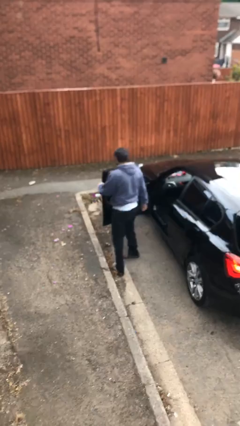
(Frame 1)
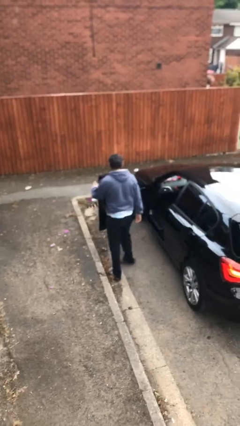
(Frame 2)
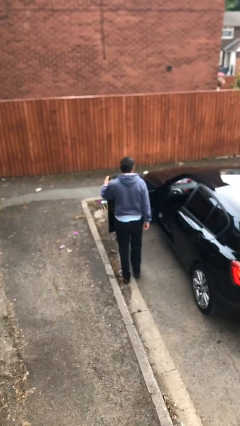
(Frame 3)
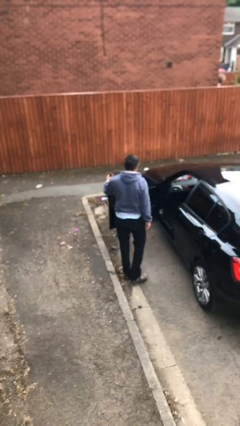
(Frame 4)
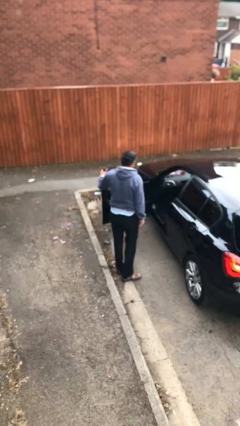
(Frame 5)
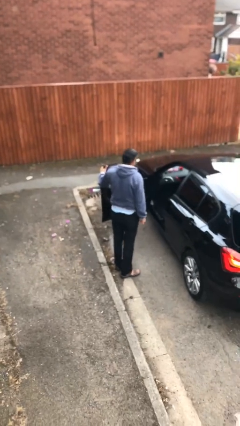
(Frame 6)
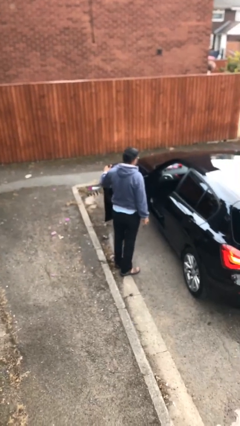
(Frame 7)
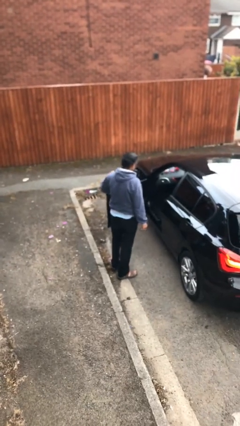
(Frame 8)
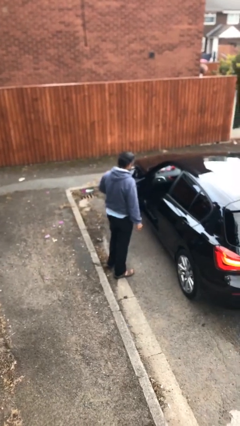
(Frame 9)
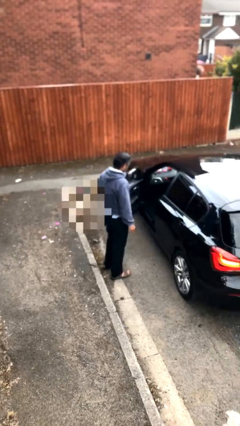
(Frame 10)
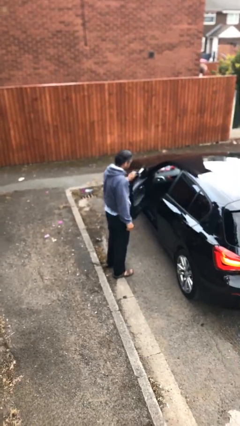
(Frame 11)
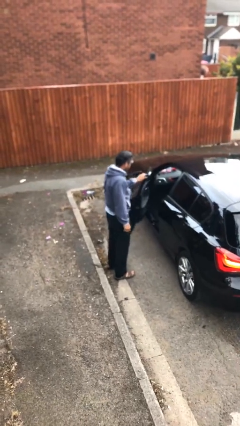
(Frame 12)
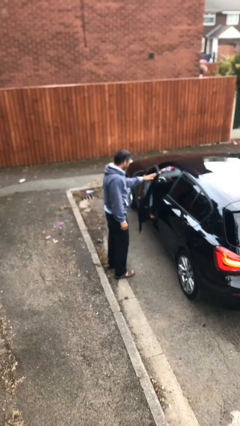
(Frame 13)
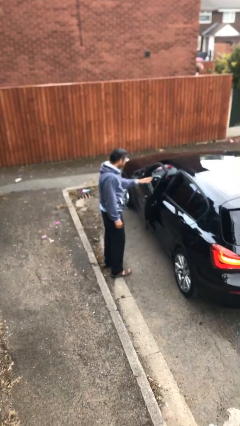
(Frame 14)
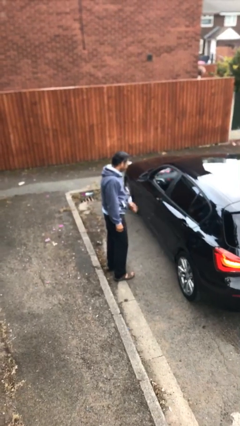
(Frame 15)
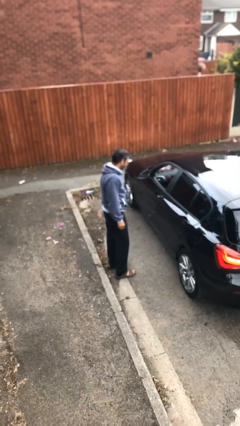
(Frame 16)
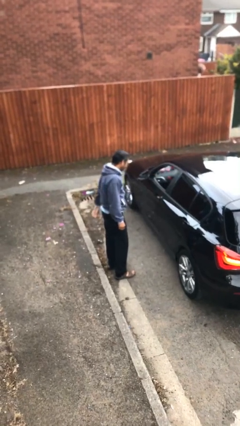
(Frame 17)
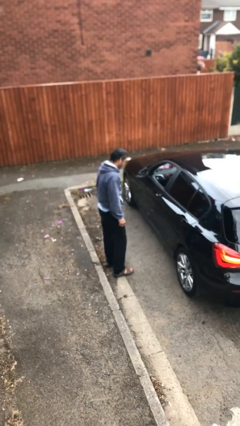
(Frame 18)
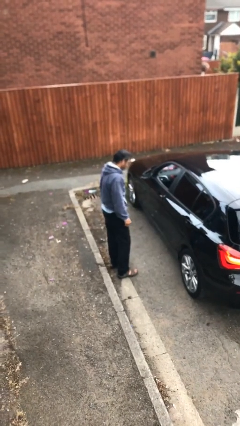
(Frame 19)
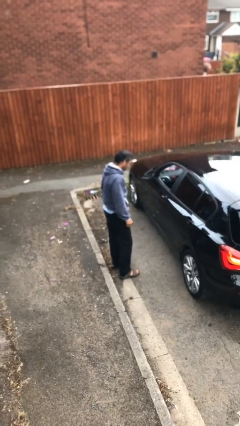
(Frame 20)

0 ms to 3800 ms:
person closes car door

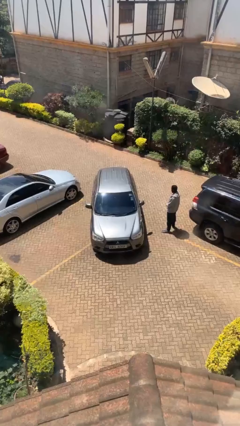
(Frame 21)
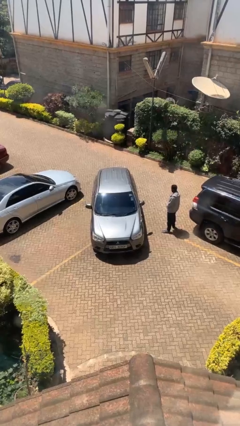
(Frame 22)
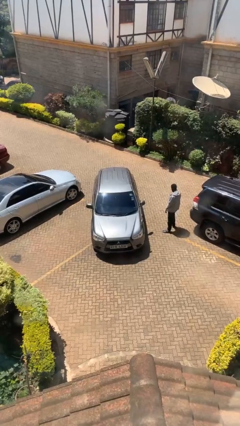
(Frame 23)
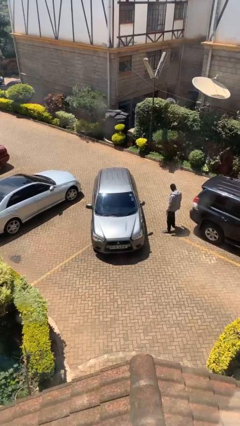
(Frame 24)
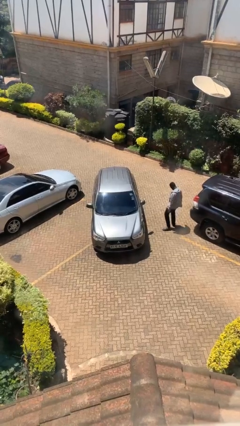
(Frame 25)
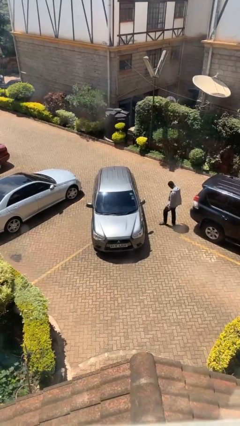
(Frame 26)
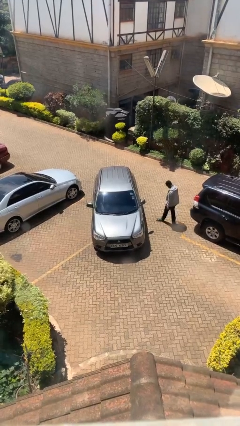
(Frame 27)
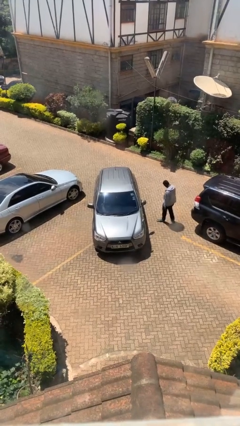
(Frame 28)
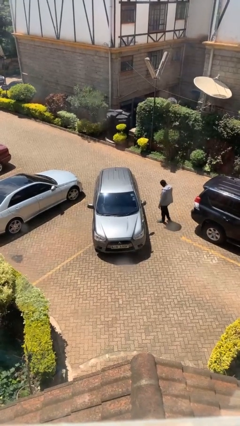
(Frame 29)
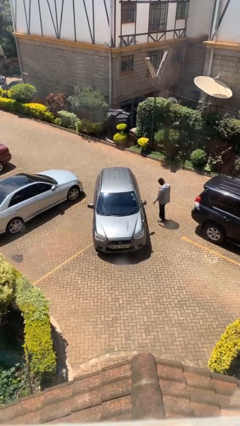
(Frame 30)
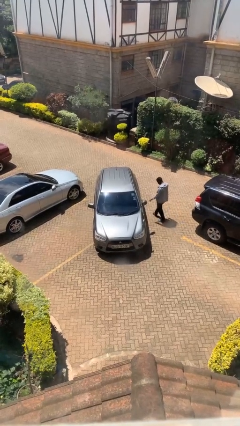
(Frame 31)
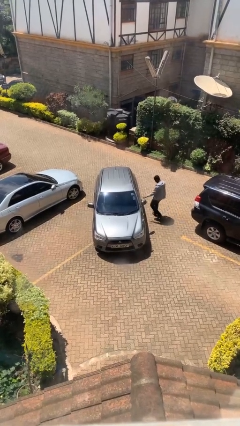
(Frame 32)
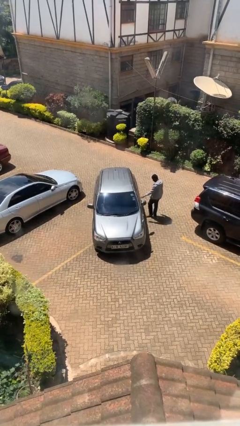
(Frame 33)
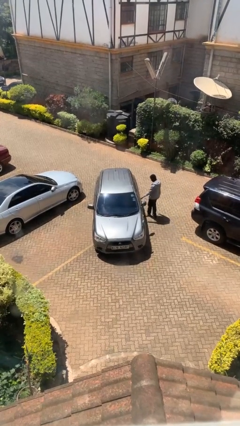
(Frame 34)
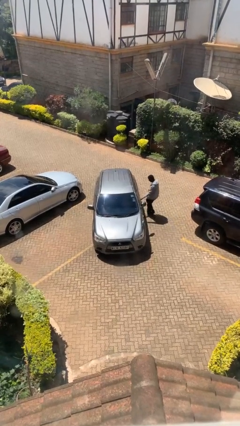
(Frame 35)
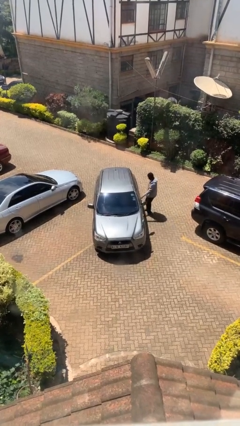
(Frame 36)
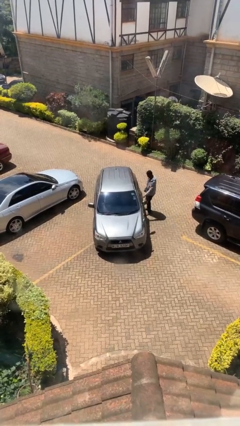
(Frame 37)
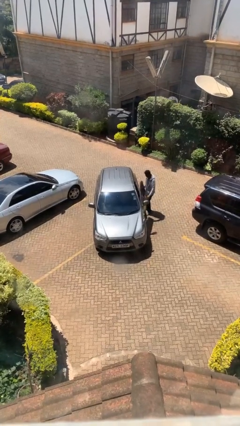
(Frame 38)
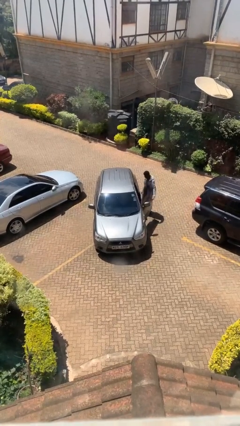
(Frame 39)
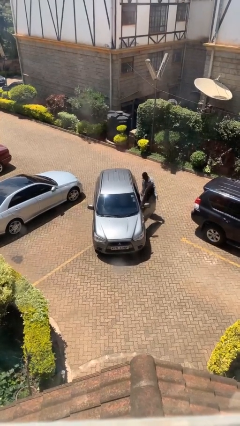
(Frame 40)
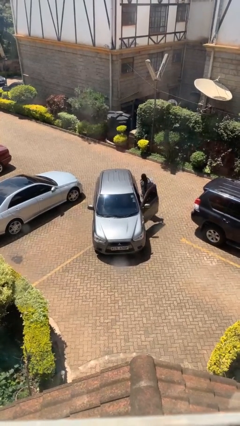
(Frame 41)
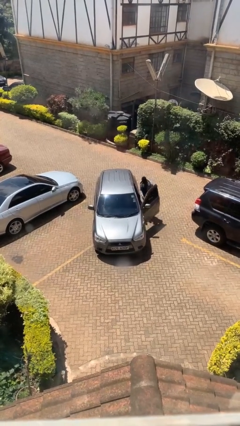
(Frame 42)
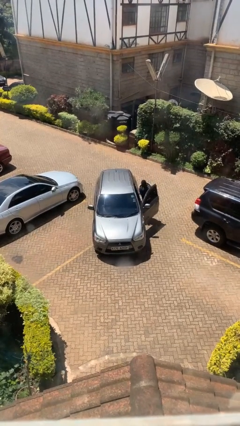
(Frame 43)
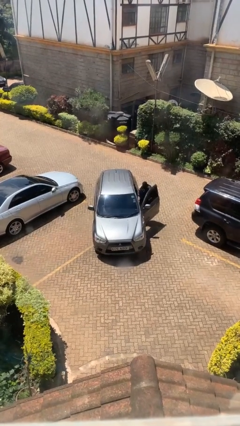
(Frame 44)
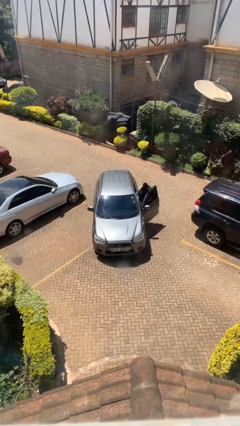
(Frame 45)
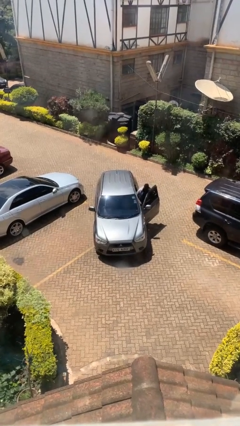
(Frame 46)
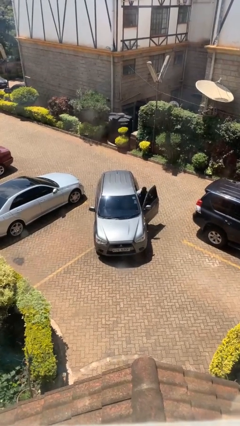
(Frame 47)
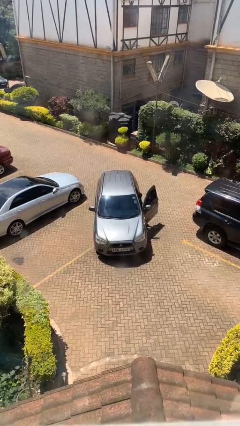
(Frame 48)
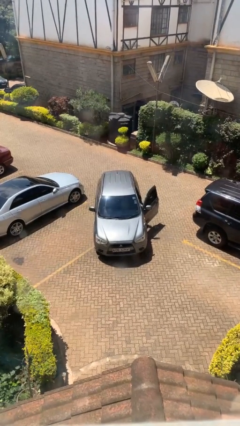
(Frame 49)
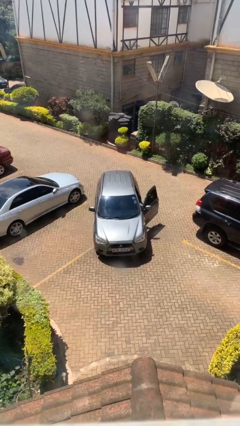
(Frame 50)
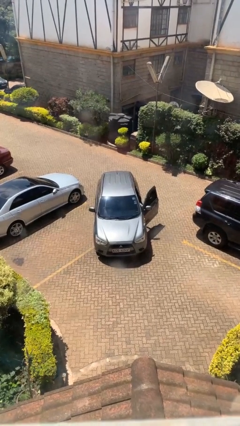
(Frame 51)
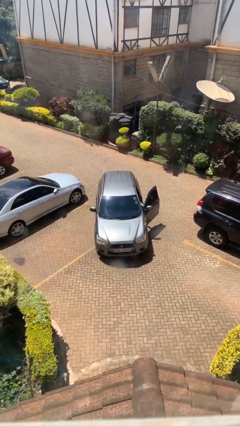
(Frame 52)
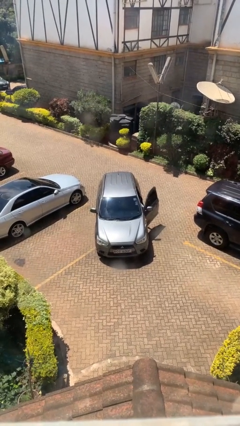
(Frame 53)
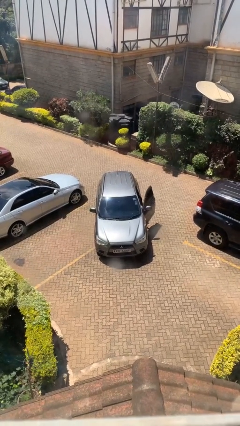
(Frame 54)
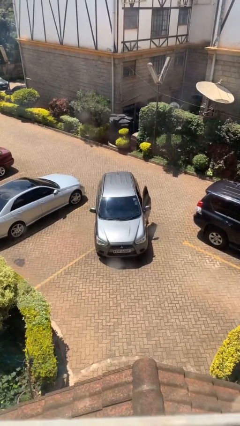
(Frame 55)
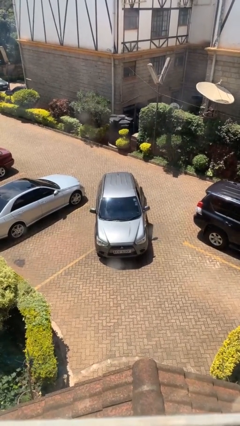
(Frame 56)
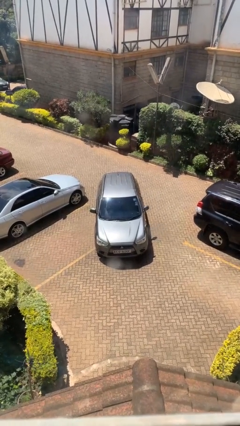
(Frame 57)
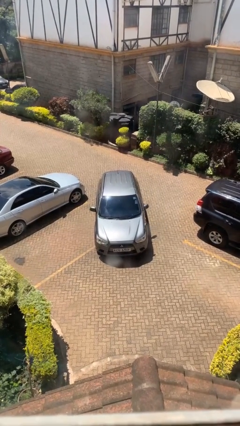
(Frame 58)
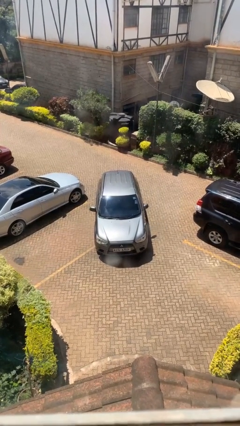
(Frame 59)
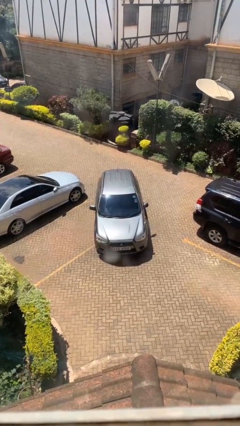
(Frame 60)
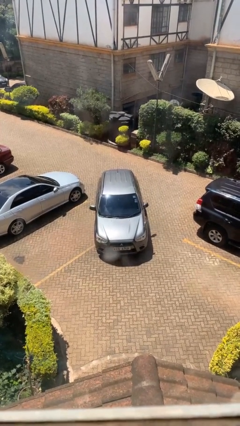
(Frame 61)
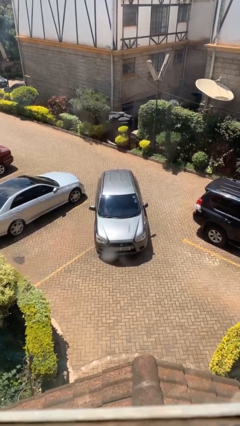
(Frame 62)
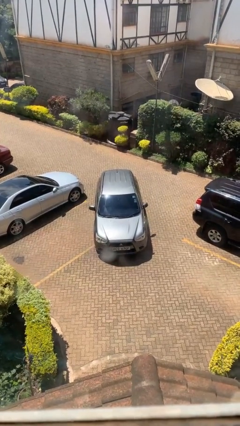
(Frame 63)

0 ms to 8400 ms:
car picks up person

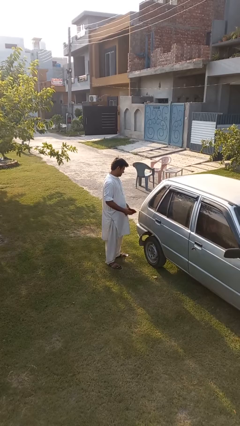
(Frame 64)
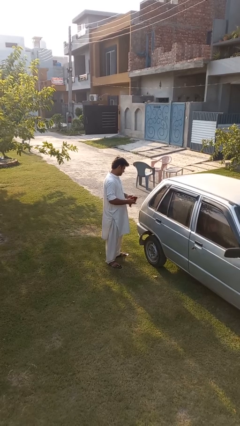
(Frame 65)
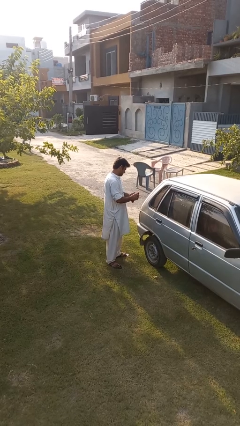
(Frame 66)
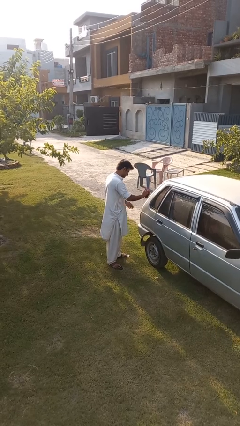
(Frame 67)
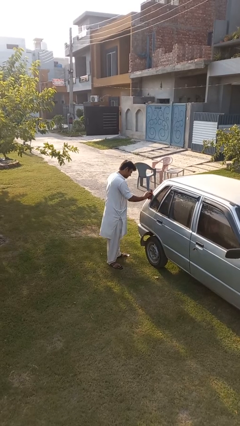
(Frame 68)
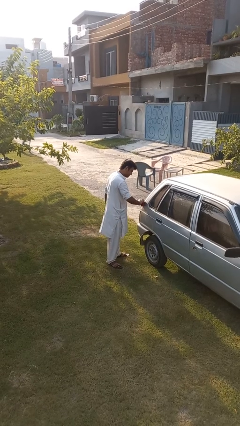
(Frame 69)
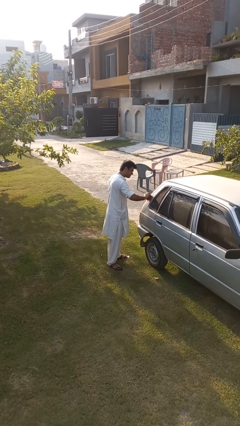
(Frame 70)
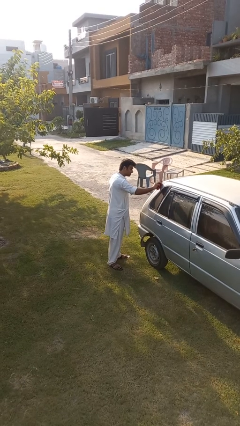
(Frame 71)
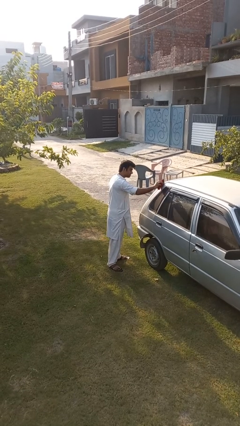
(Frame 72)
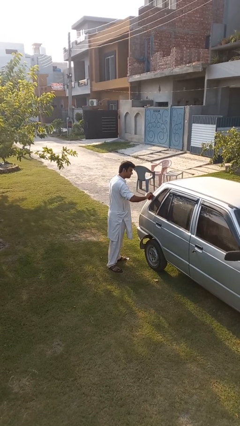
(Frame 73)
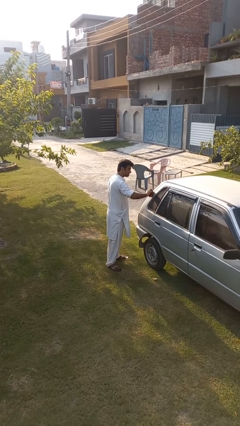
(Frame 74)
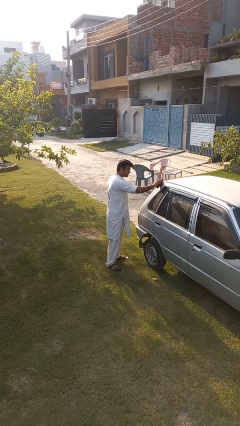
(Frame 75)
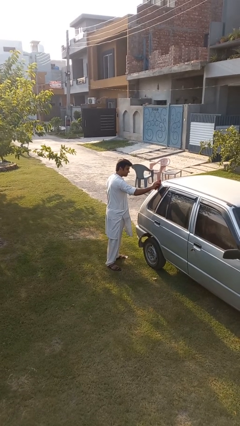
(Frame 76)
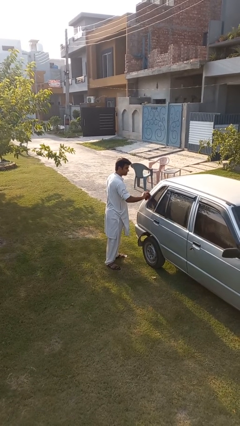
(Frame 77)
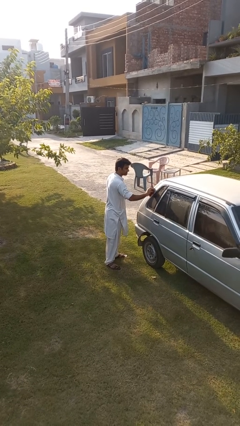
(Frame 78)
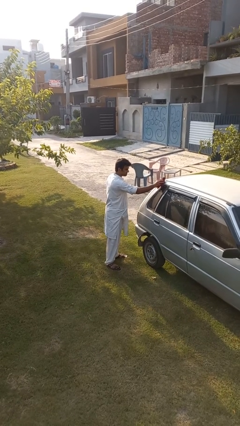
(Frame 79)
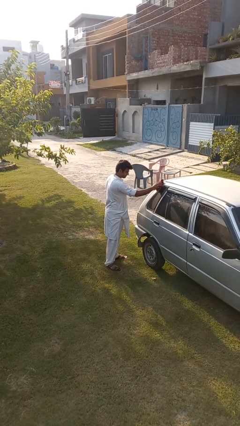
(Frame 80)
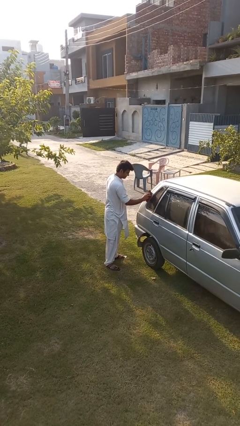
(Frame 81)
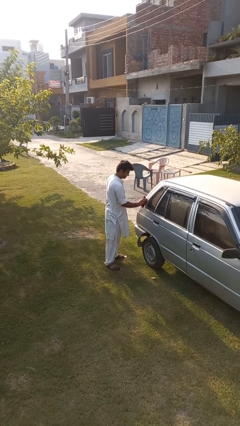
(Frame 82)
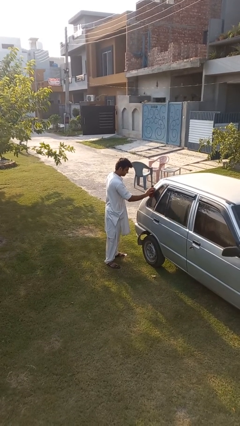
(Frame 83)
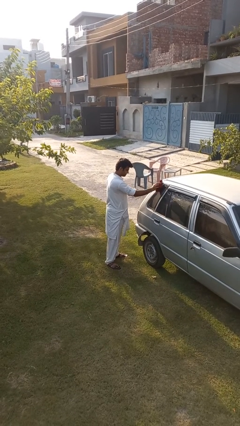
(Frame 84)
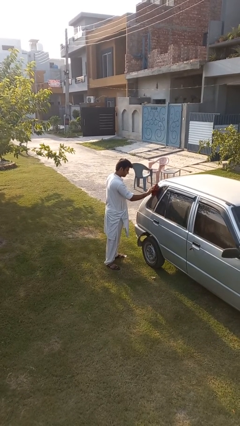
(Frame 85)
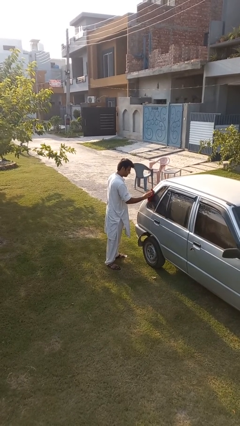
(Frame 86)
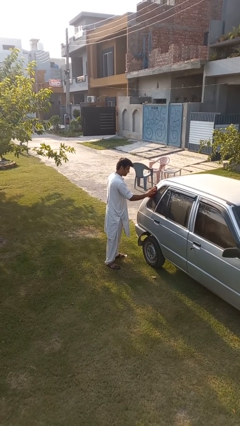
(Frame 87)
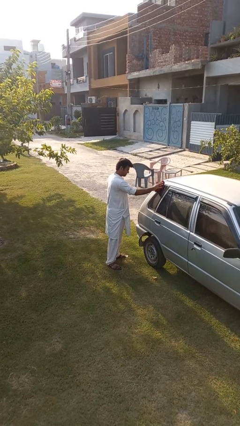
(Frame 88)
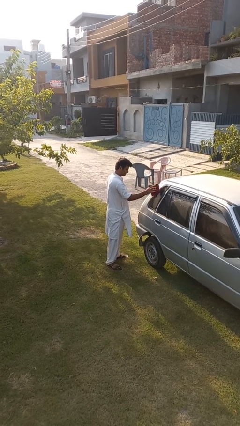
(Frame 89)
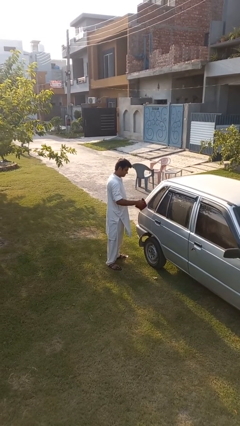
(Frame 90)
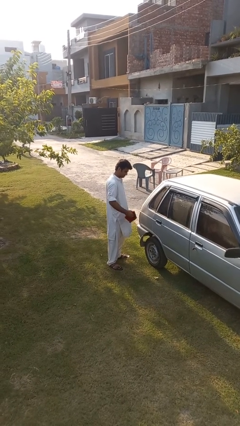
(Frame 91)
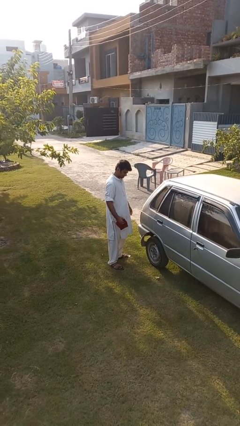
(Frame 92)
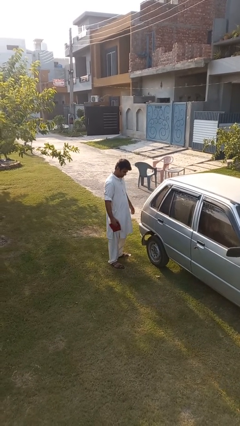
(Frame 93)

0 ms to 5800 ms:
person polishes car with rag
